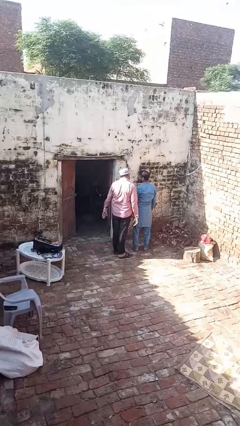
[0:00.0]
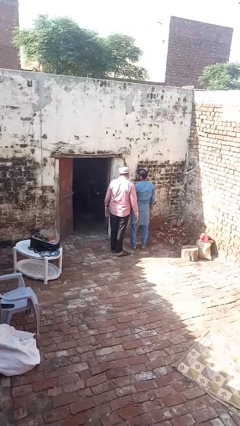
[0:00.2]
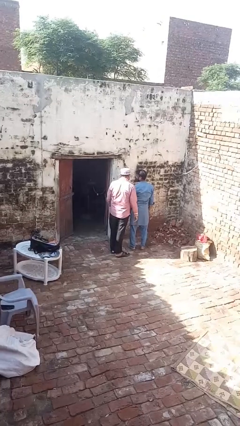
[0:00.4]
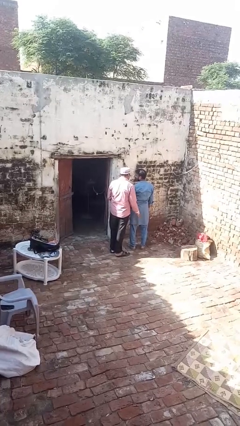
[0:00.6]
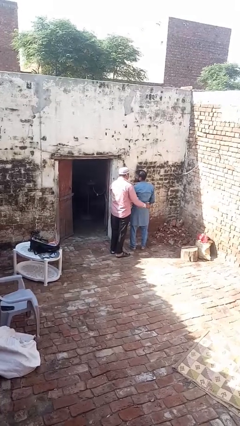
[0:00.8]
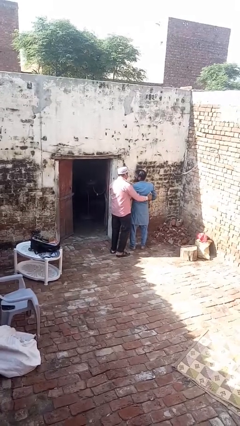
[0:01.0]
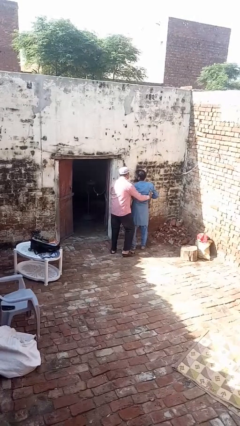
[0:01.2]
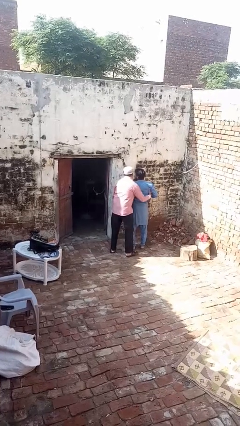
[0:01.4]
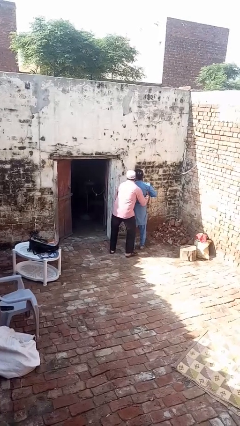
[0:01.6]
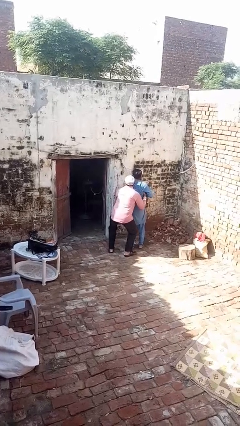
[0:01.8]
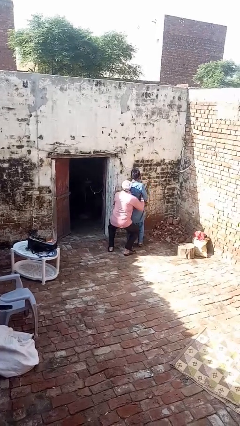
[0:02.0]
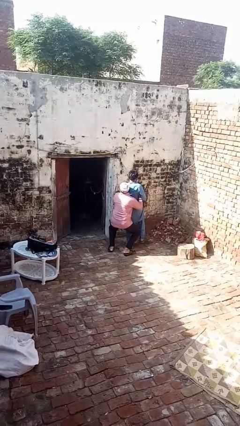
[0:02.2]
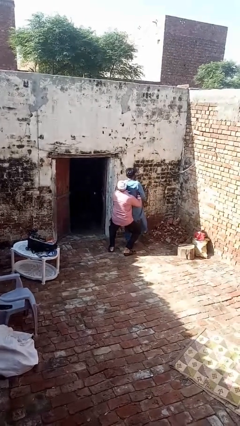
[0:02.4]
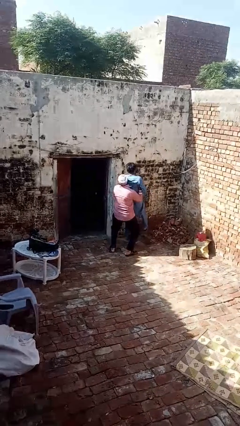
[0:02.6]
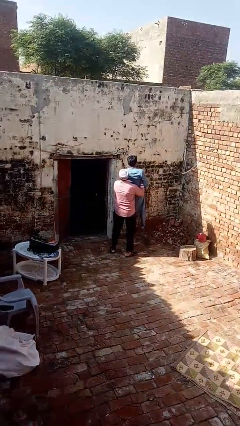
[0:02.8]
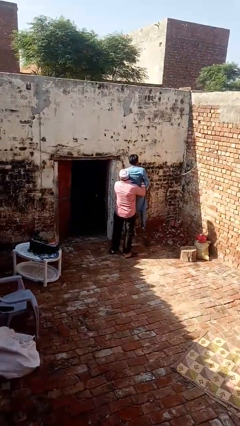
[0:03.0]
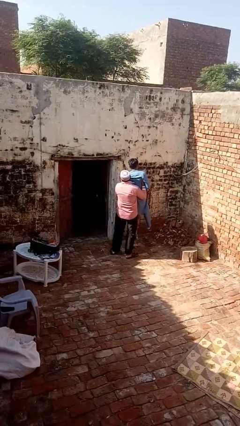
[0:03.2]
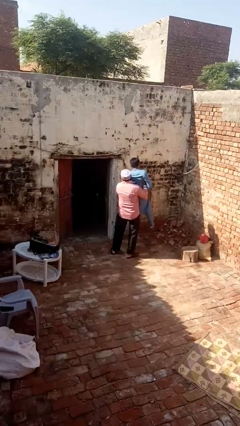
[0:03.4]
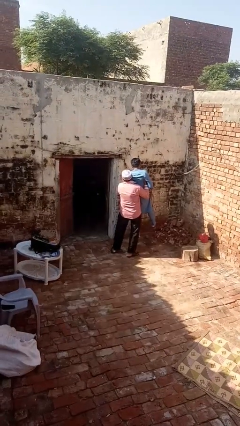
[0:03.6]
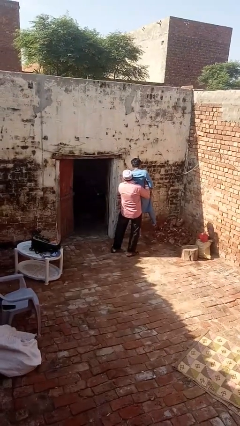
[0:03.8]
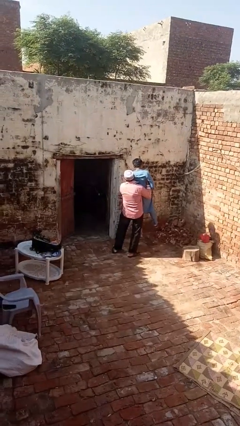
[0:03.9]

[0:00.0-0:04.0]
person picks up person

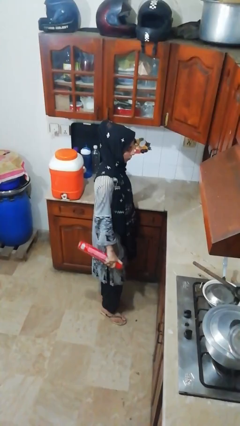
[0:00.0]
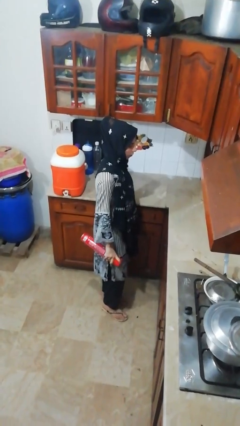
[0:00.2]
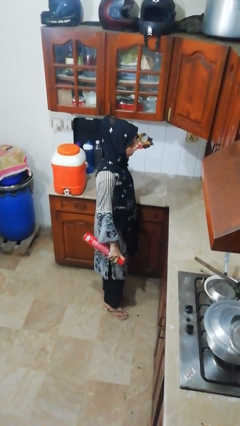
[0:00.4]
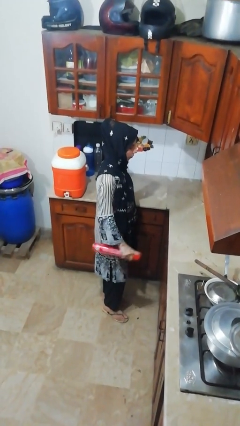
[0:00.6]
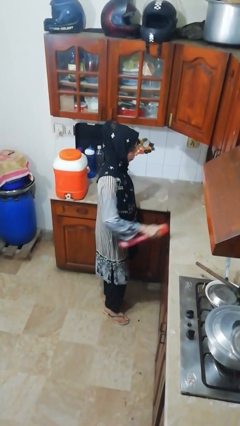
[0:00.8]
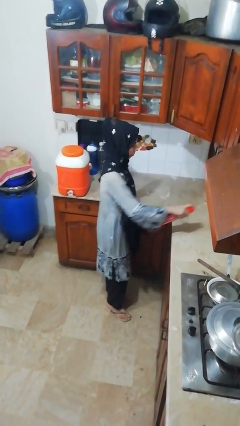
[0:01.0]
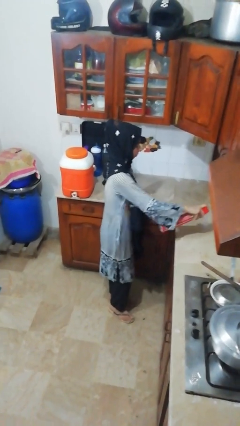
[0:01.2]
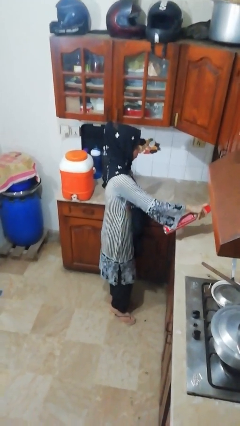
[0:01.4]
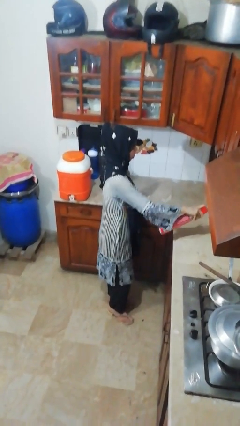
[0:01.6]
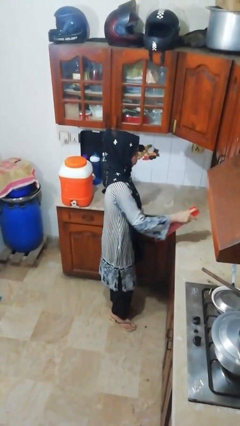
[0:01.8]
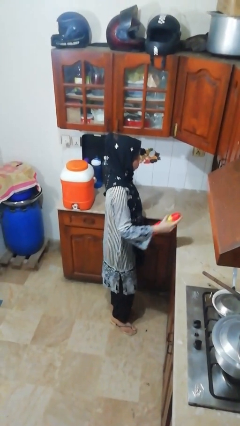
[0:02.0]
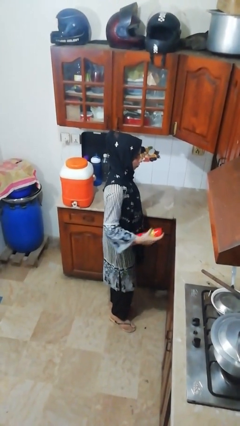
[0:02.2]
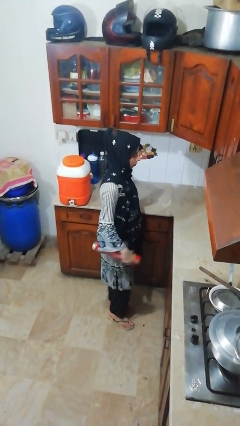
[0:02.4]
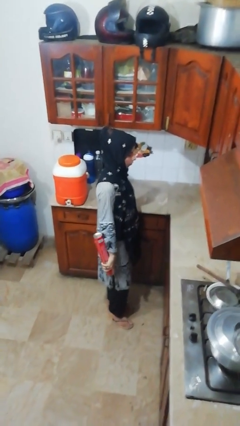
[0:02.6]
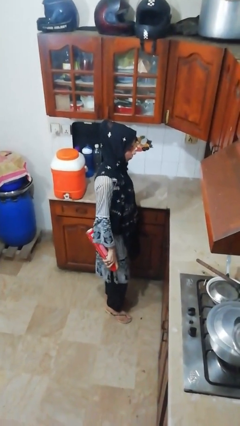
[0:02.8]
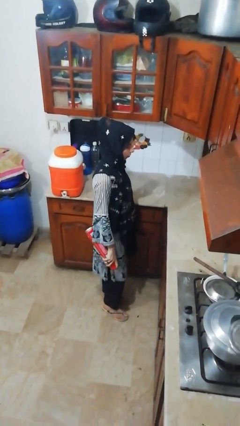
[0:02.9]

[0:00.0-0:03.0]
person sprays from bottle

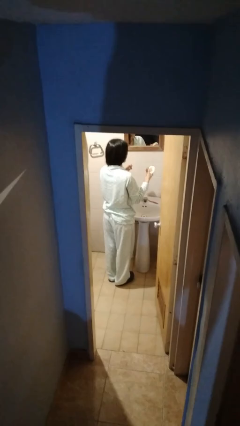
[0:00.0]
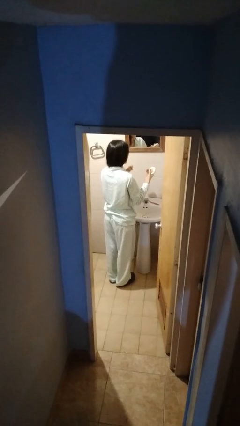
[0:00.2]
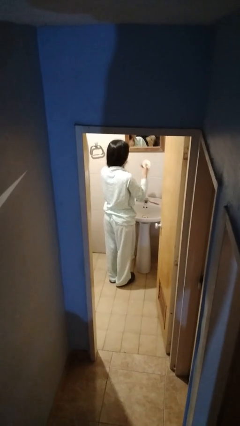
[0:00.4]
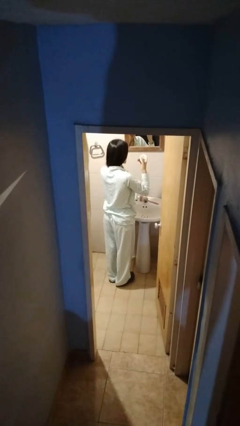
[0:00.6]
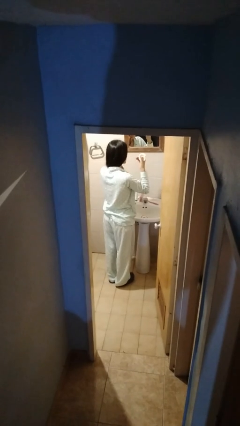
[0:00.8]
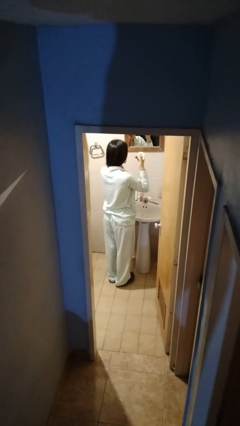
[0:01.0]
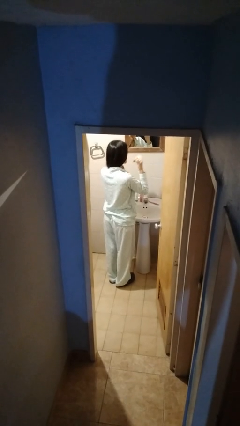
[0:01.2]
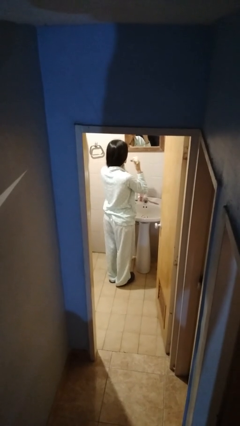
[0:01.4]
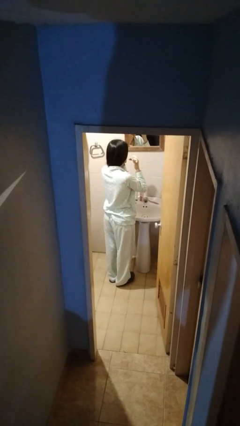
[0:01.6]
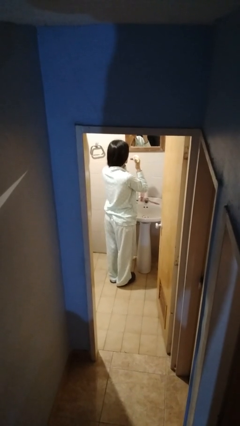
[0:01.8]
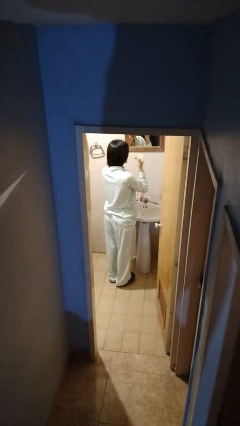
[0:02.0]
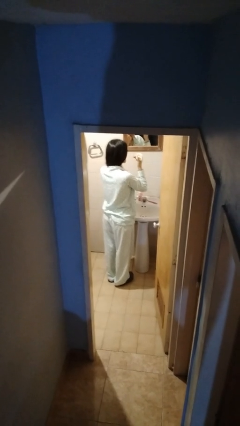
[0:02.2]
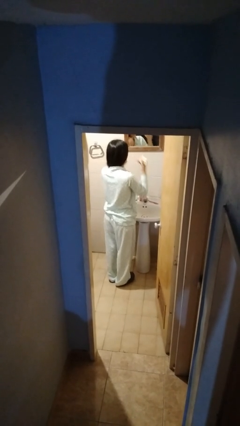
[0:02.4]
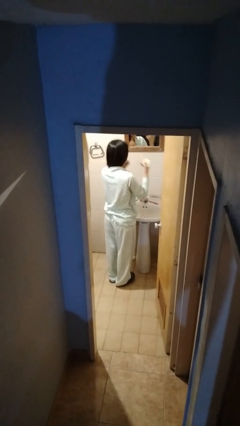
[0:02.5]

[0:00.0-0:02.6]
person flosses

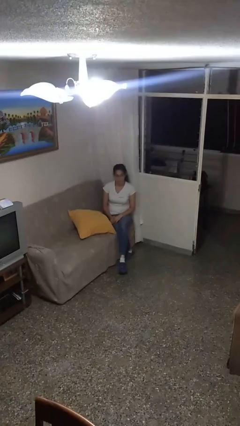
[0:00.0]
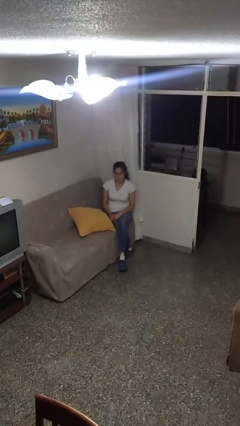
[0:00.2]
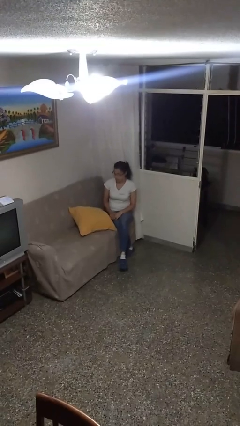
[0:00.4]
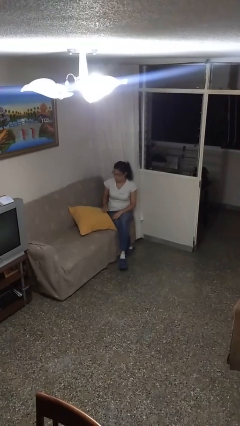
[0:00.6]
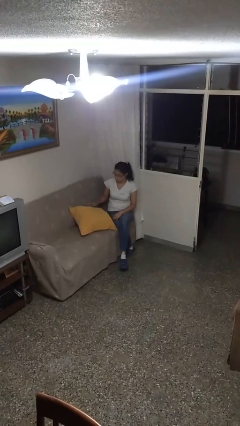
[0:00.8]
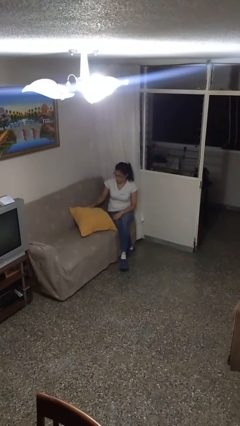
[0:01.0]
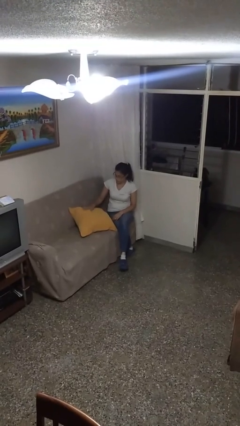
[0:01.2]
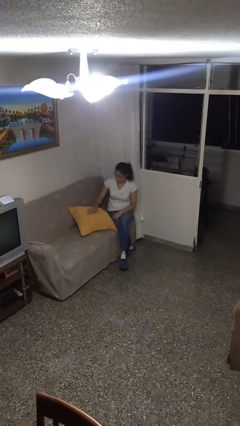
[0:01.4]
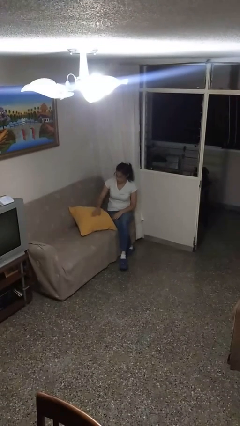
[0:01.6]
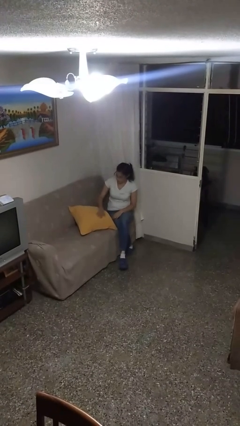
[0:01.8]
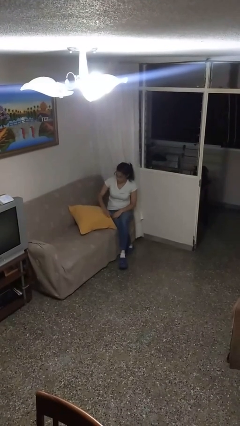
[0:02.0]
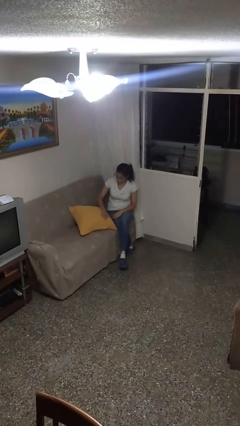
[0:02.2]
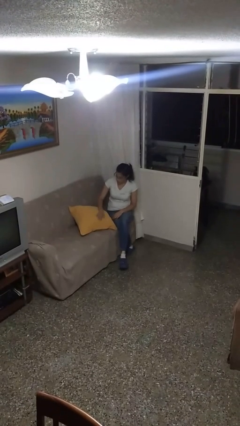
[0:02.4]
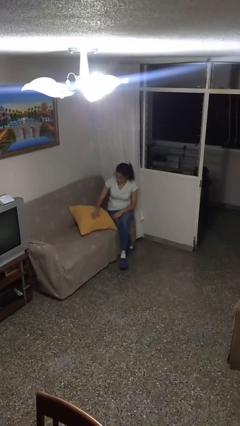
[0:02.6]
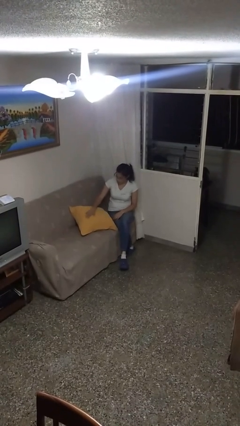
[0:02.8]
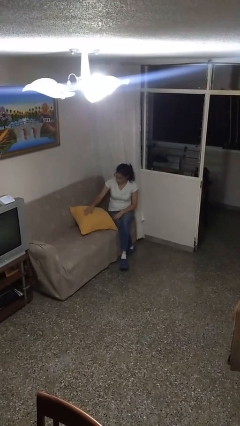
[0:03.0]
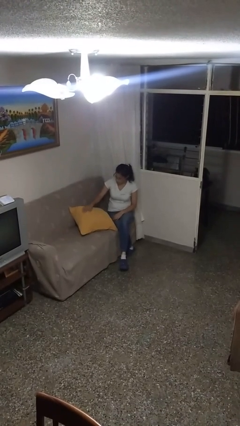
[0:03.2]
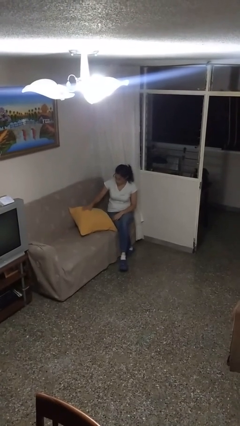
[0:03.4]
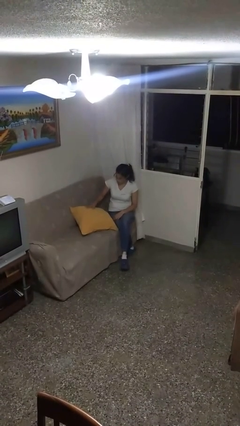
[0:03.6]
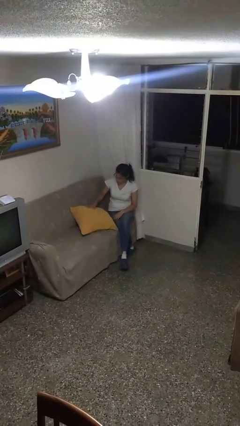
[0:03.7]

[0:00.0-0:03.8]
person waves hand over object

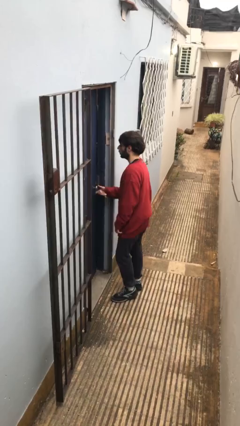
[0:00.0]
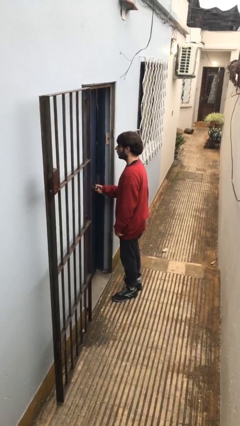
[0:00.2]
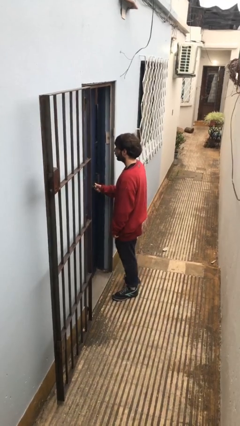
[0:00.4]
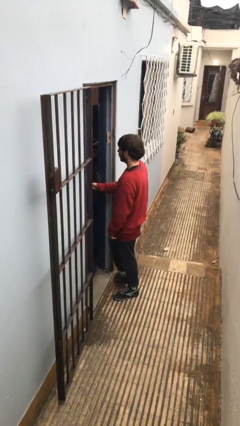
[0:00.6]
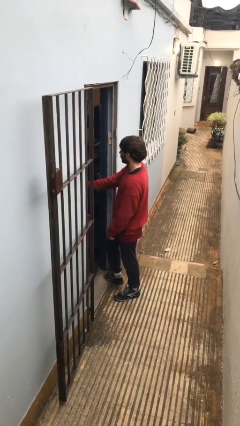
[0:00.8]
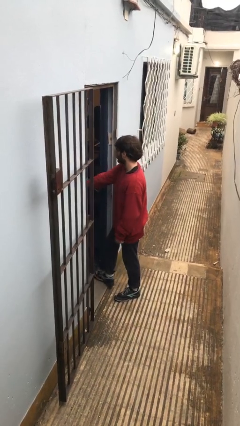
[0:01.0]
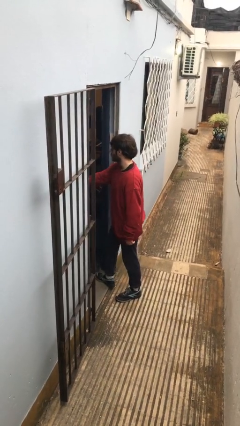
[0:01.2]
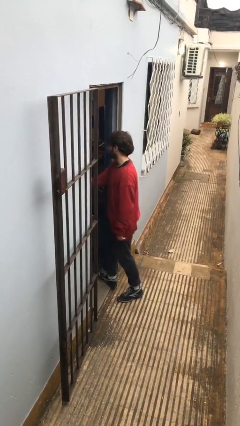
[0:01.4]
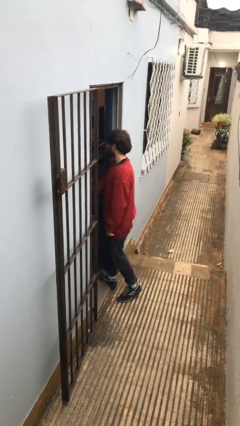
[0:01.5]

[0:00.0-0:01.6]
person opens facility door

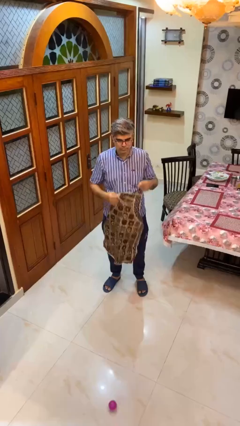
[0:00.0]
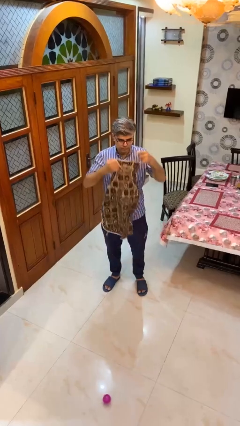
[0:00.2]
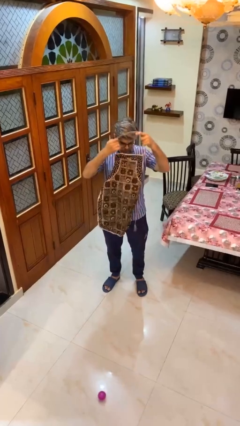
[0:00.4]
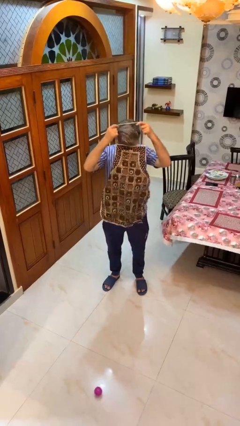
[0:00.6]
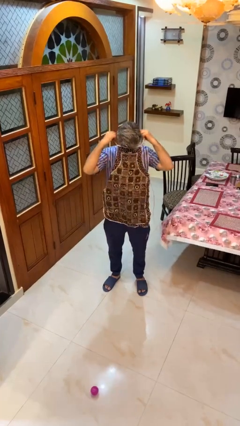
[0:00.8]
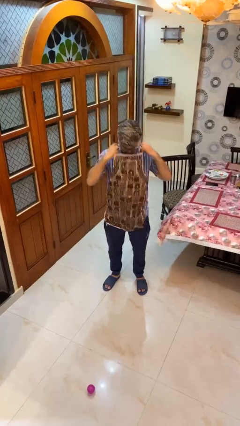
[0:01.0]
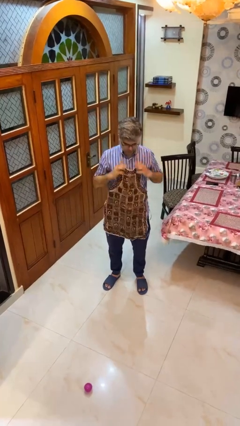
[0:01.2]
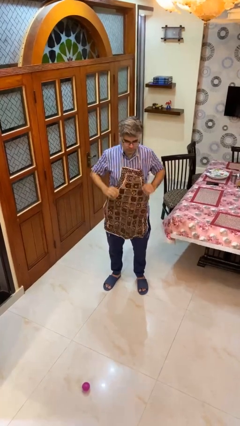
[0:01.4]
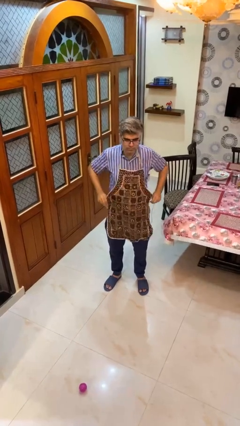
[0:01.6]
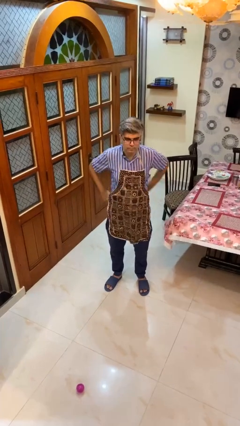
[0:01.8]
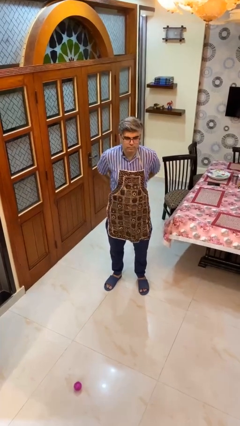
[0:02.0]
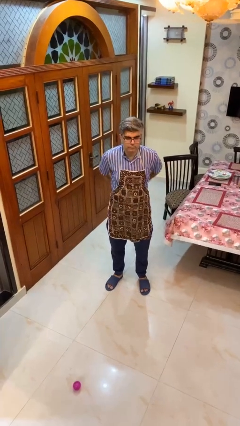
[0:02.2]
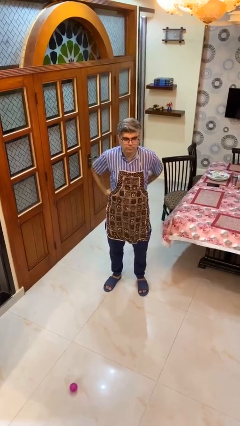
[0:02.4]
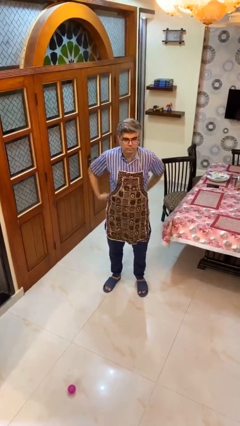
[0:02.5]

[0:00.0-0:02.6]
person puts on apron
